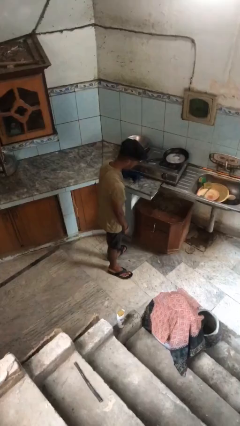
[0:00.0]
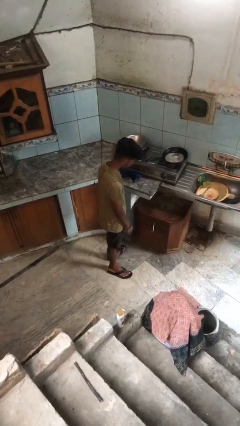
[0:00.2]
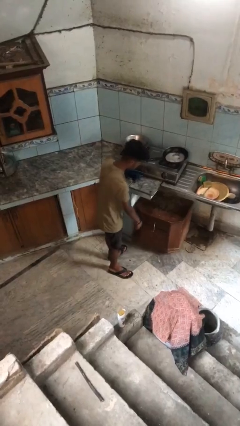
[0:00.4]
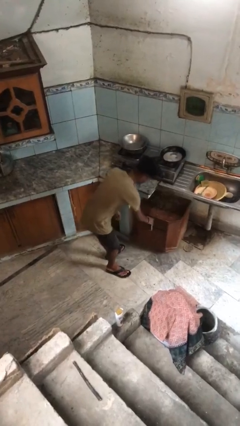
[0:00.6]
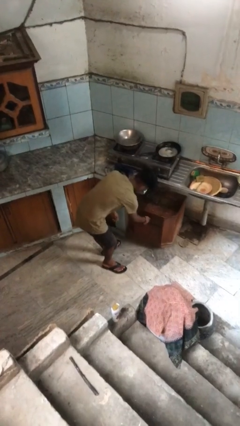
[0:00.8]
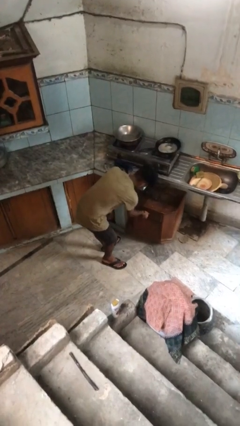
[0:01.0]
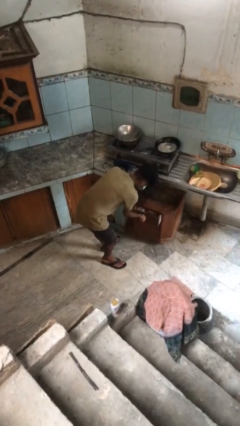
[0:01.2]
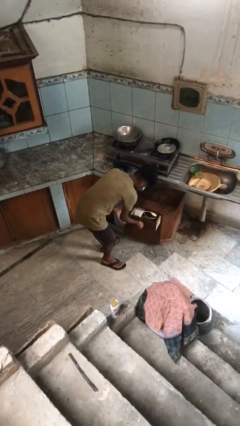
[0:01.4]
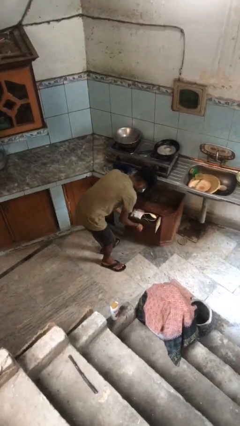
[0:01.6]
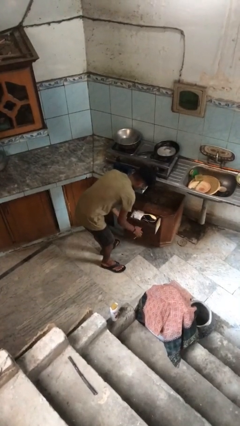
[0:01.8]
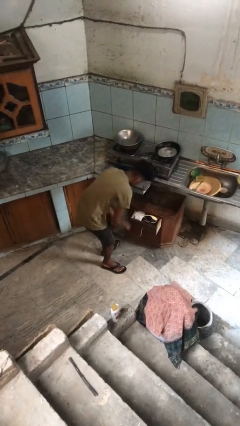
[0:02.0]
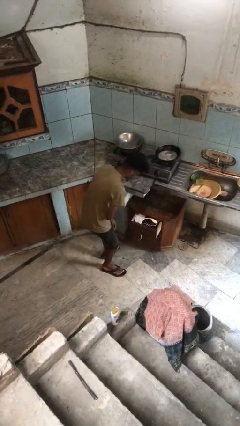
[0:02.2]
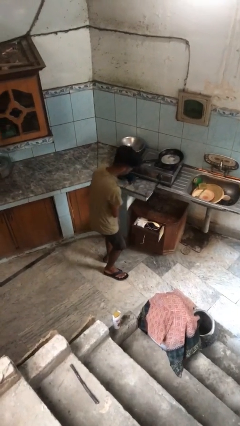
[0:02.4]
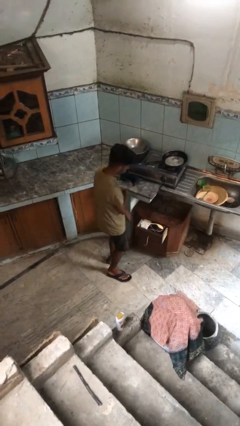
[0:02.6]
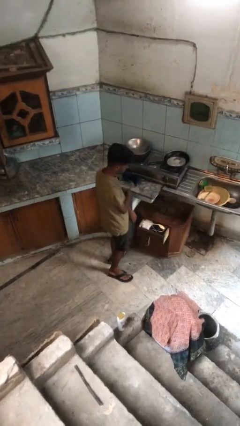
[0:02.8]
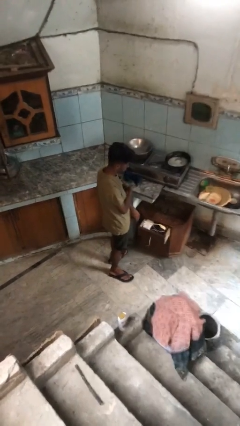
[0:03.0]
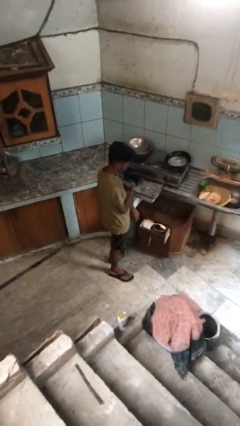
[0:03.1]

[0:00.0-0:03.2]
person opens kitchen drawer

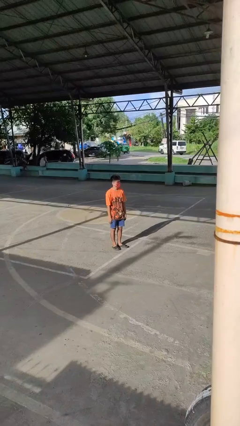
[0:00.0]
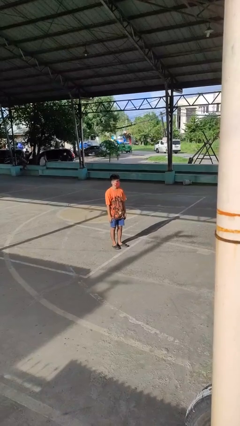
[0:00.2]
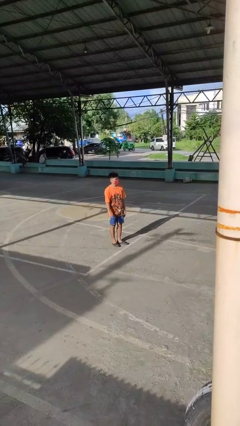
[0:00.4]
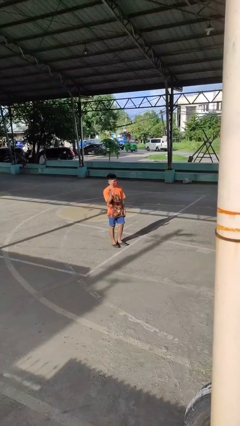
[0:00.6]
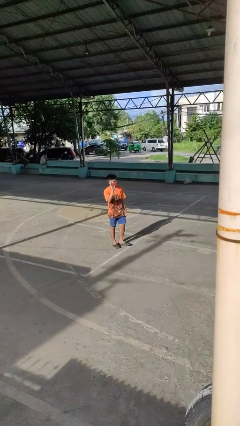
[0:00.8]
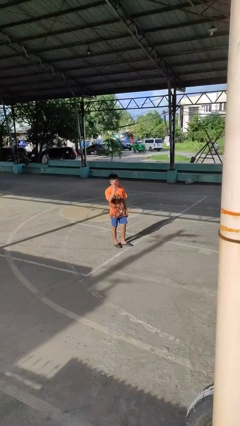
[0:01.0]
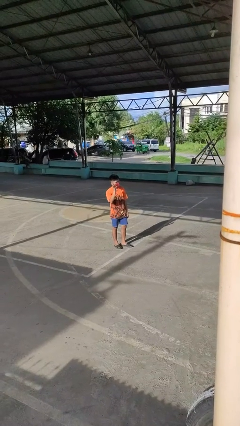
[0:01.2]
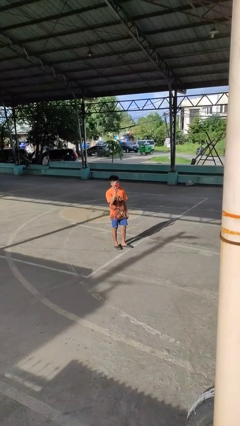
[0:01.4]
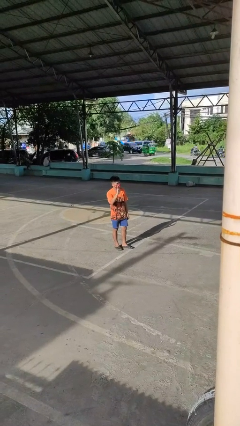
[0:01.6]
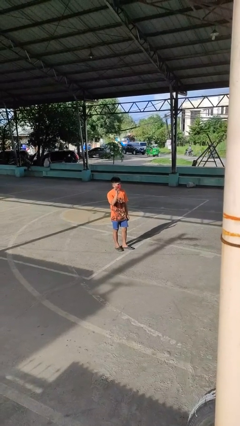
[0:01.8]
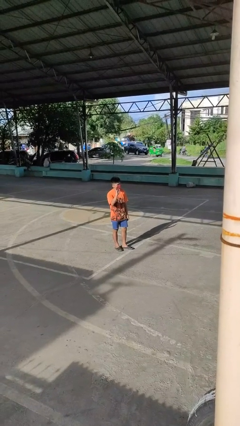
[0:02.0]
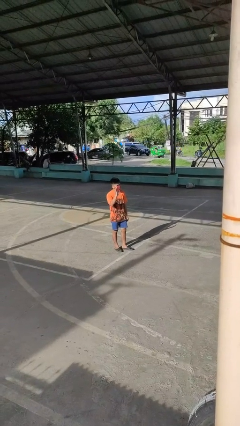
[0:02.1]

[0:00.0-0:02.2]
person waves at person

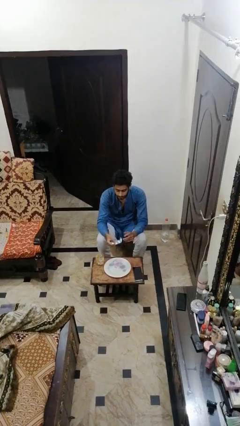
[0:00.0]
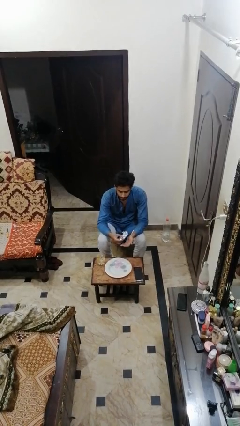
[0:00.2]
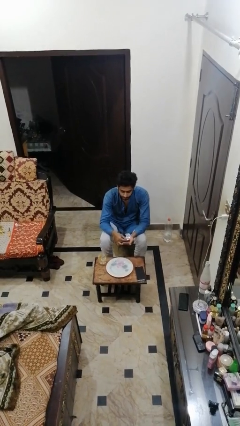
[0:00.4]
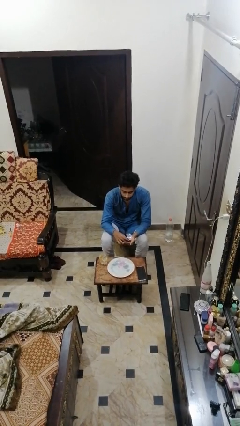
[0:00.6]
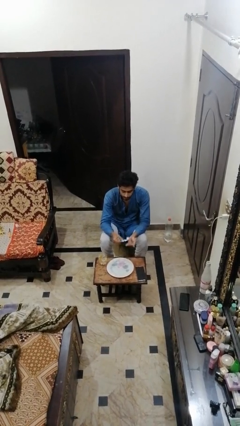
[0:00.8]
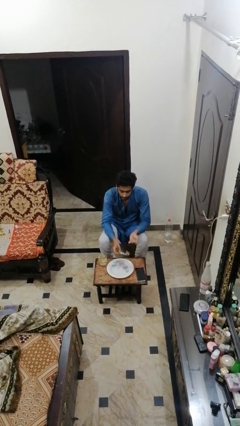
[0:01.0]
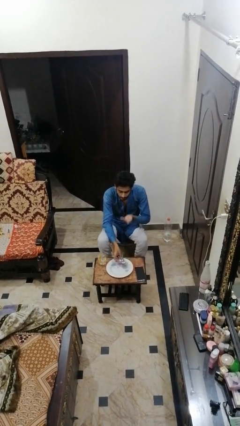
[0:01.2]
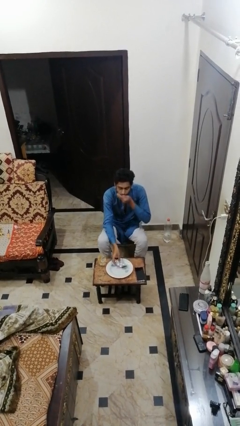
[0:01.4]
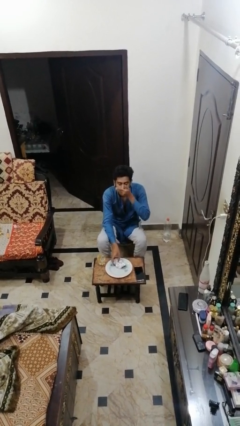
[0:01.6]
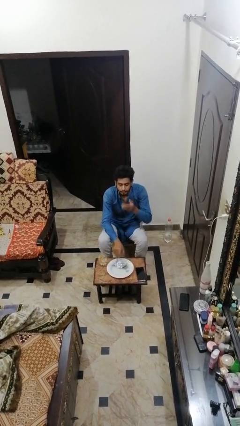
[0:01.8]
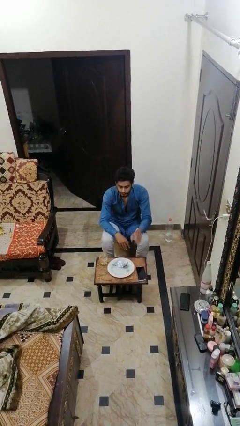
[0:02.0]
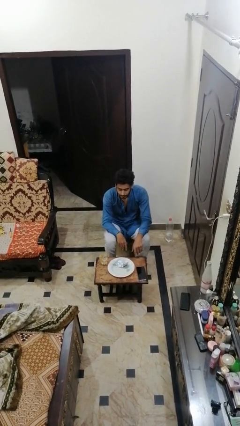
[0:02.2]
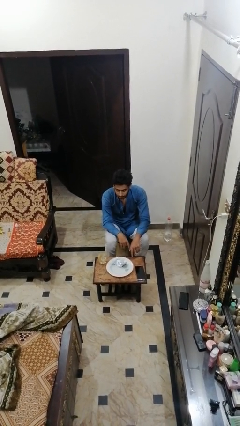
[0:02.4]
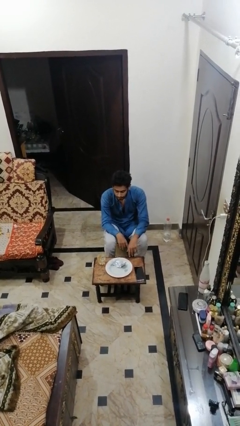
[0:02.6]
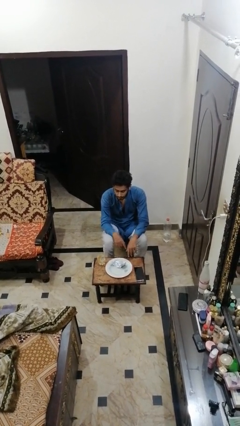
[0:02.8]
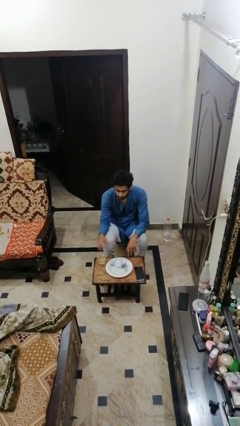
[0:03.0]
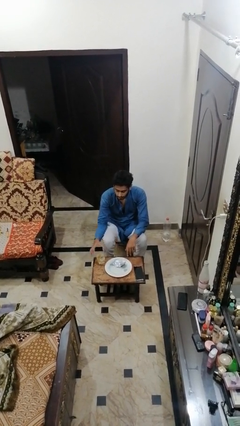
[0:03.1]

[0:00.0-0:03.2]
person takes medicine pills

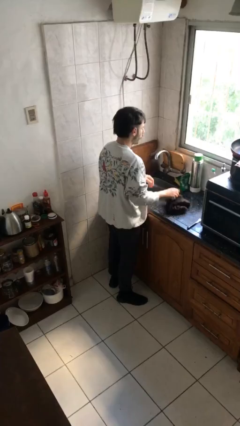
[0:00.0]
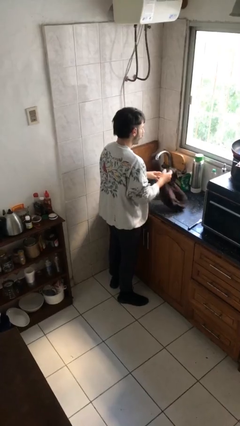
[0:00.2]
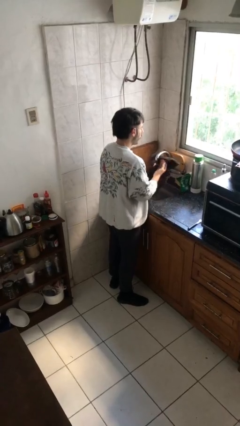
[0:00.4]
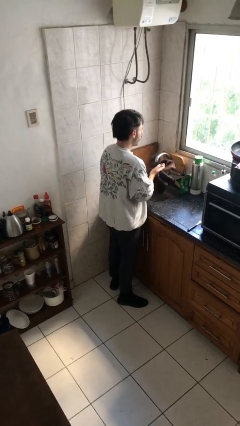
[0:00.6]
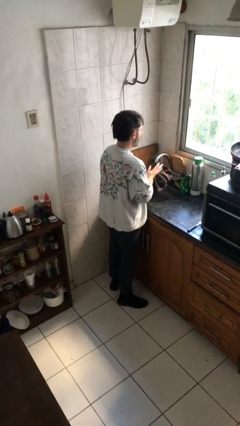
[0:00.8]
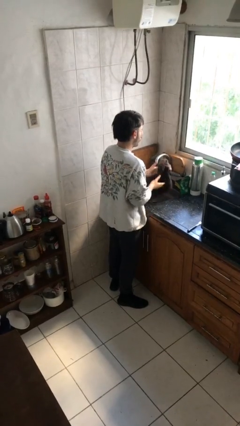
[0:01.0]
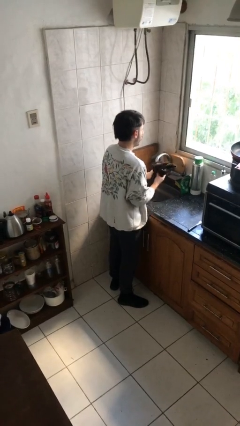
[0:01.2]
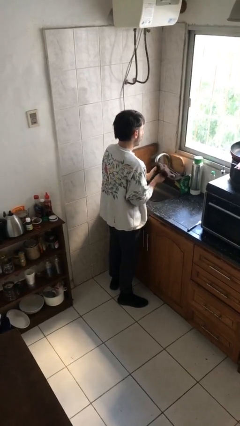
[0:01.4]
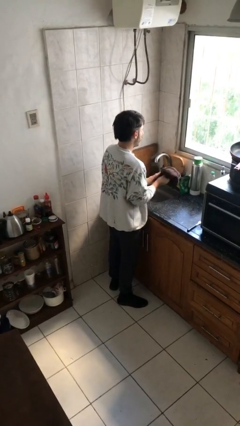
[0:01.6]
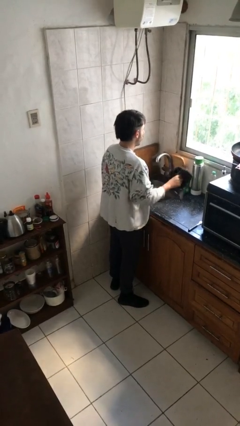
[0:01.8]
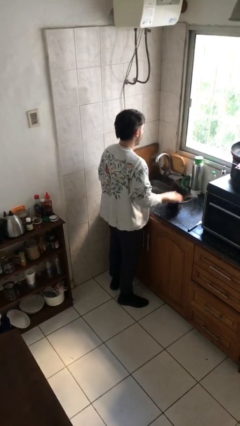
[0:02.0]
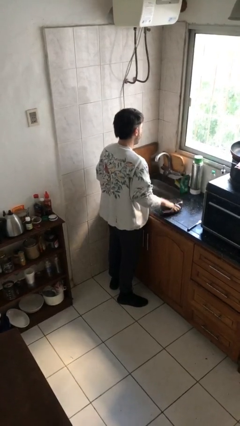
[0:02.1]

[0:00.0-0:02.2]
person dries hands with towel

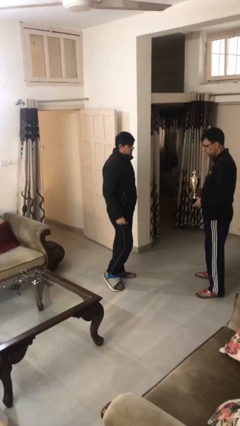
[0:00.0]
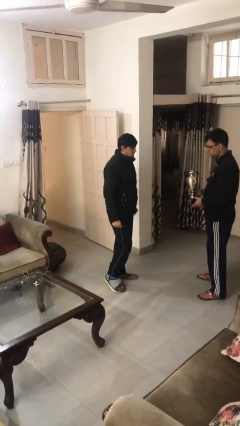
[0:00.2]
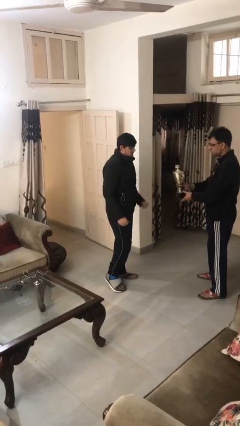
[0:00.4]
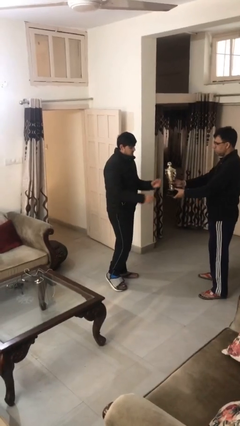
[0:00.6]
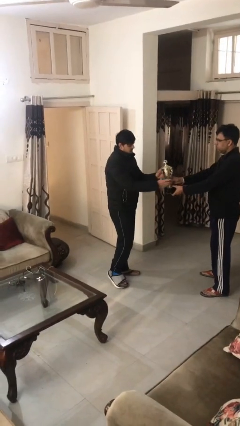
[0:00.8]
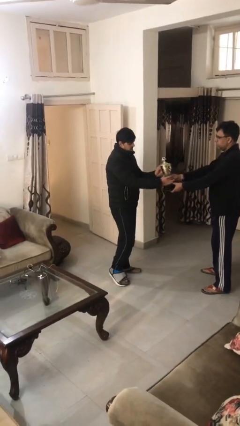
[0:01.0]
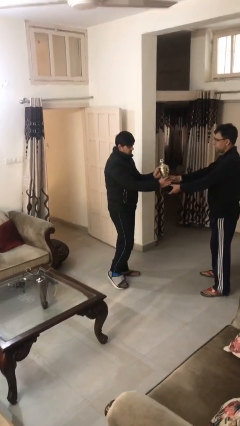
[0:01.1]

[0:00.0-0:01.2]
person transfers object to person

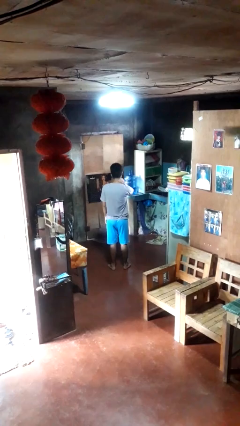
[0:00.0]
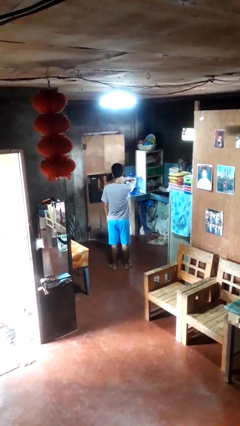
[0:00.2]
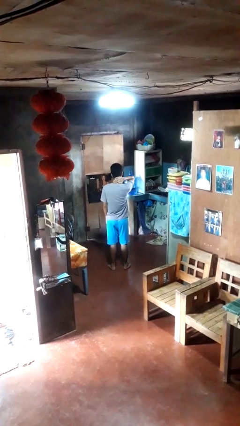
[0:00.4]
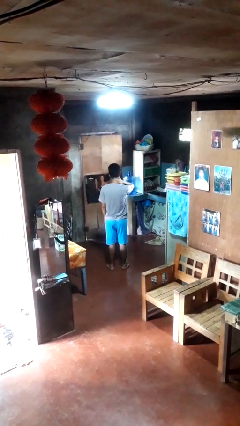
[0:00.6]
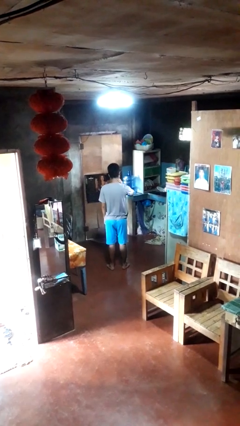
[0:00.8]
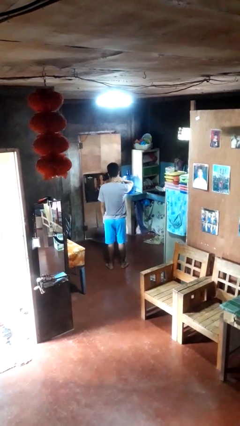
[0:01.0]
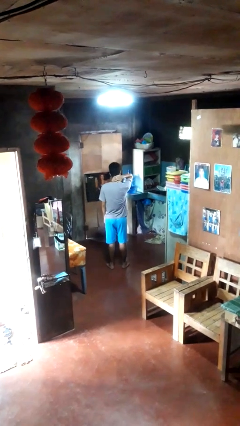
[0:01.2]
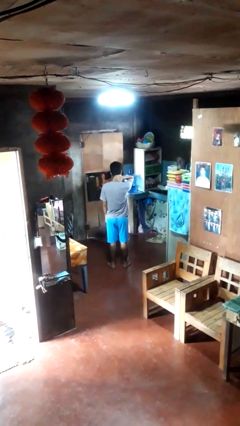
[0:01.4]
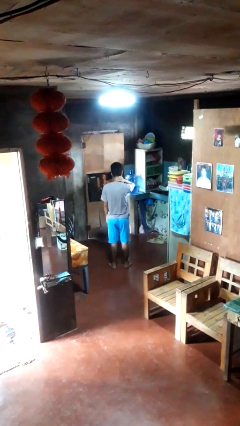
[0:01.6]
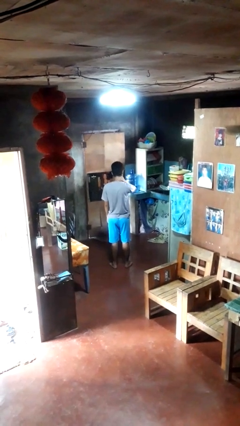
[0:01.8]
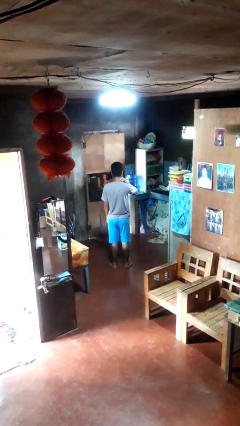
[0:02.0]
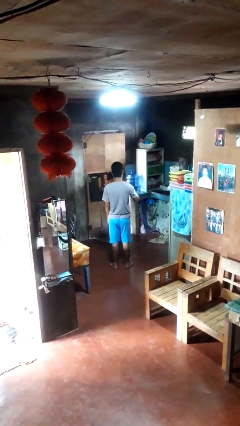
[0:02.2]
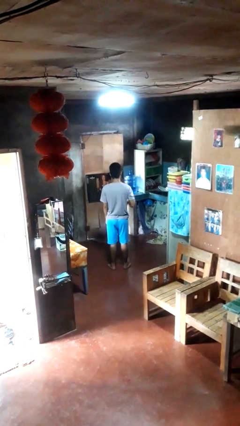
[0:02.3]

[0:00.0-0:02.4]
person rubs neck

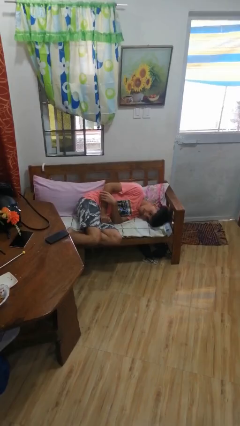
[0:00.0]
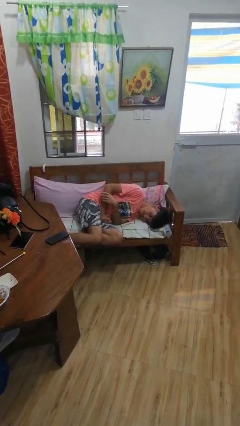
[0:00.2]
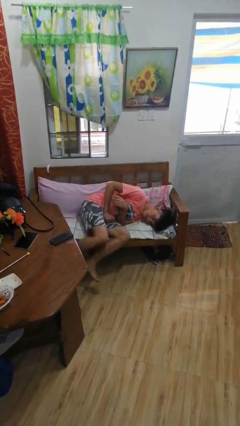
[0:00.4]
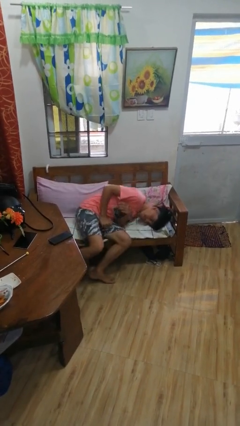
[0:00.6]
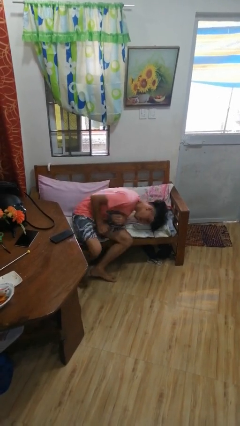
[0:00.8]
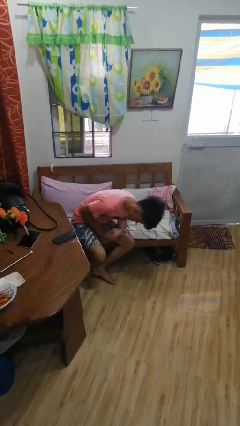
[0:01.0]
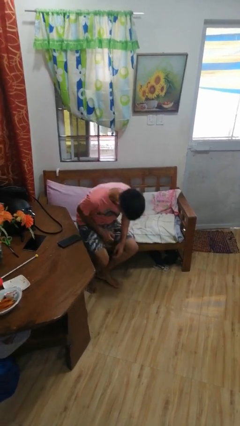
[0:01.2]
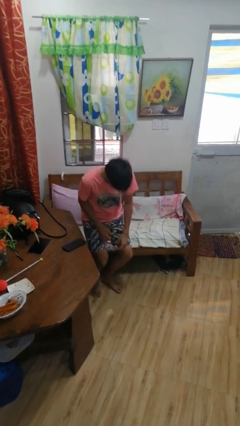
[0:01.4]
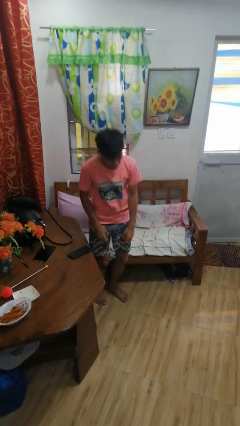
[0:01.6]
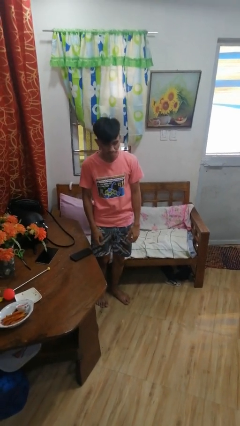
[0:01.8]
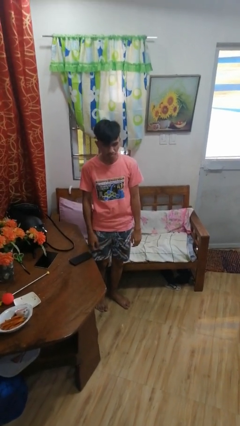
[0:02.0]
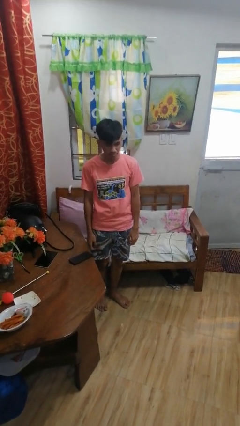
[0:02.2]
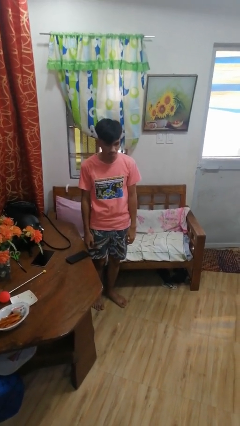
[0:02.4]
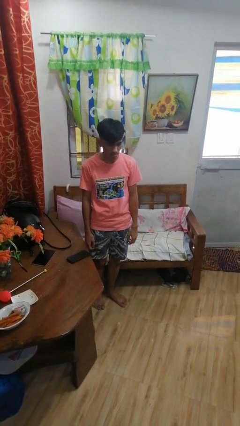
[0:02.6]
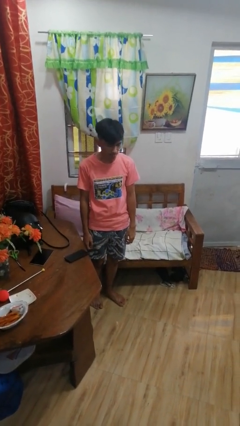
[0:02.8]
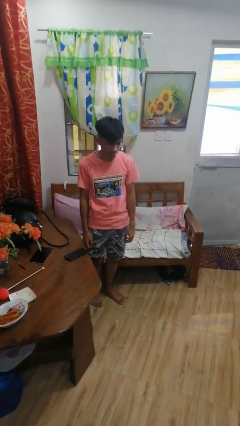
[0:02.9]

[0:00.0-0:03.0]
person stands up
